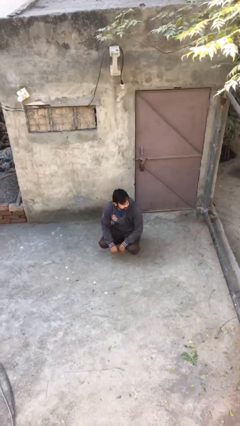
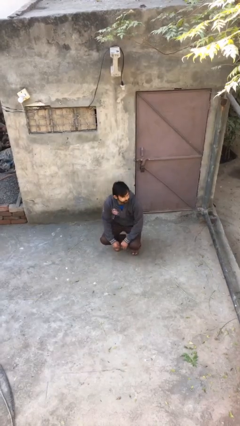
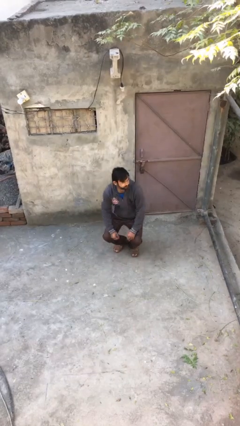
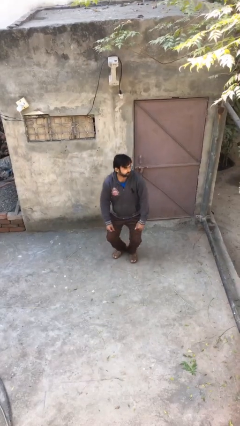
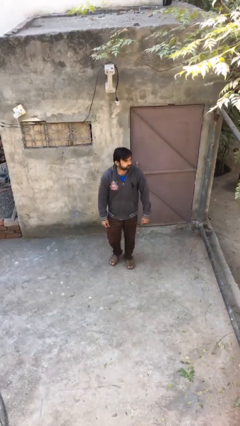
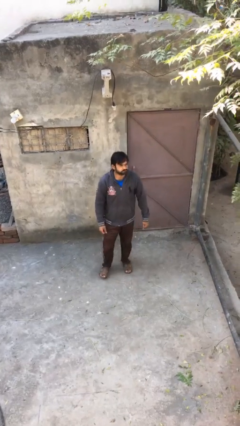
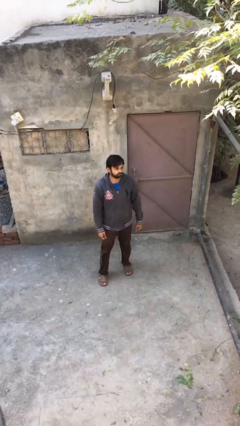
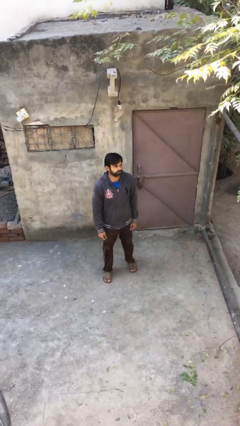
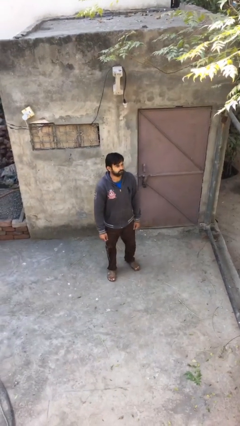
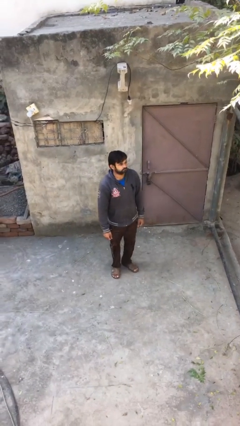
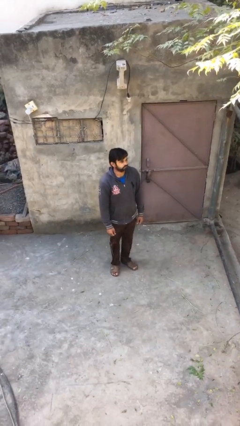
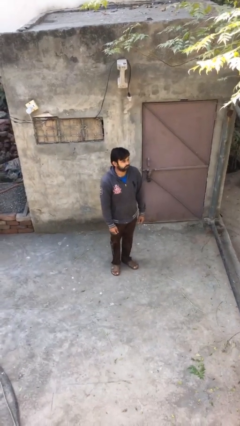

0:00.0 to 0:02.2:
person stands up

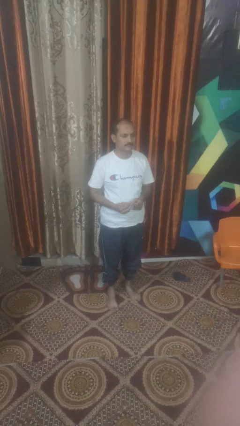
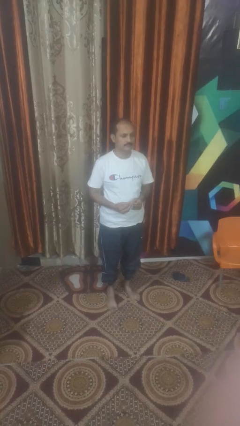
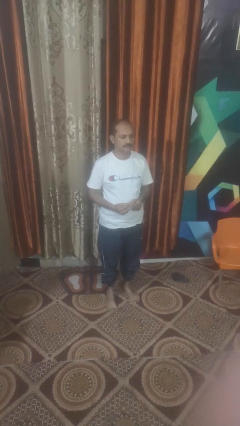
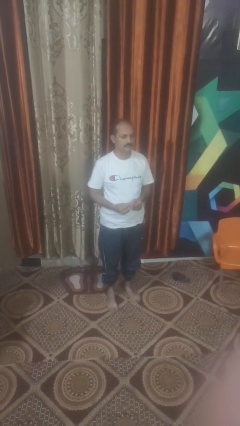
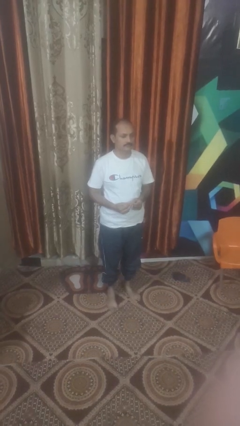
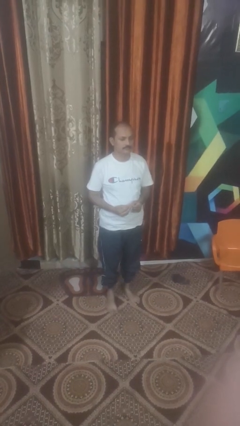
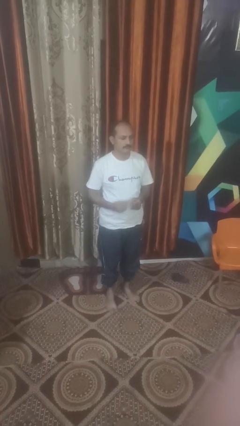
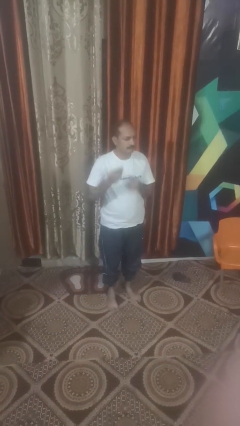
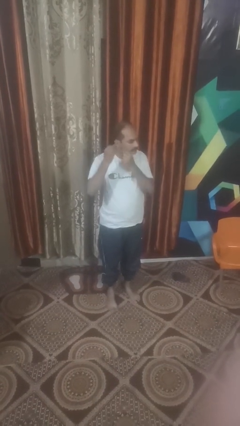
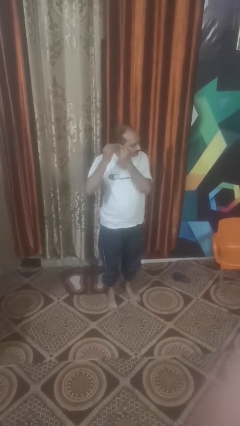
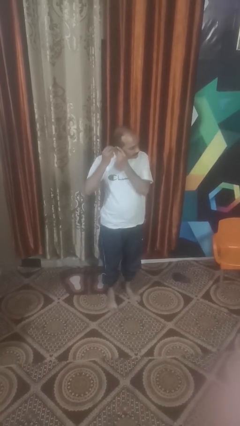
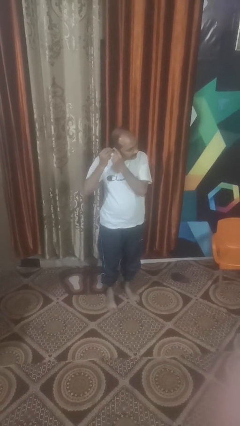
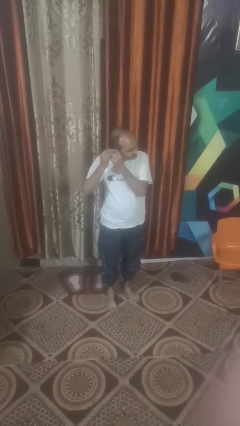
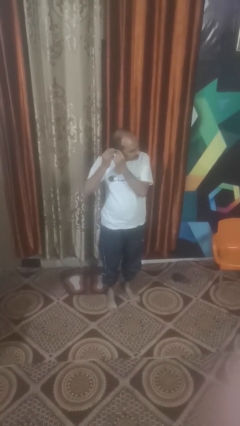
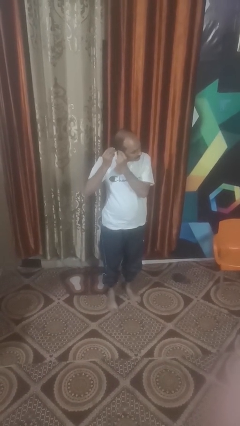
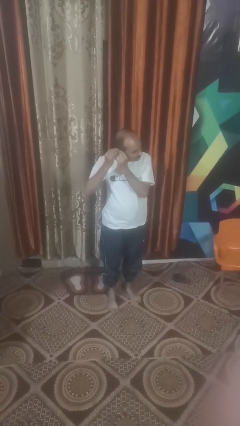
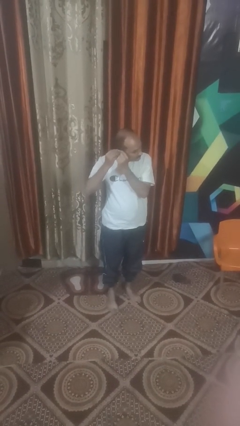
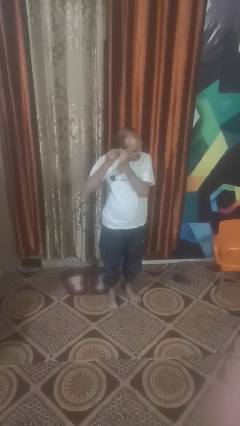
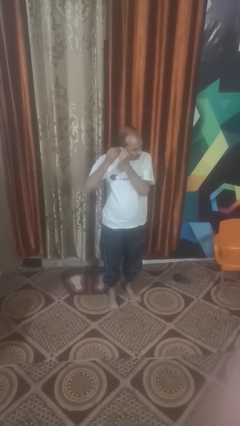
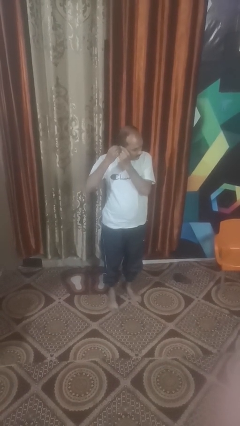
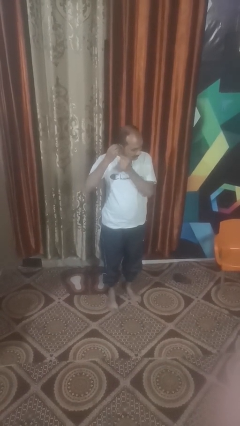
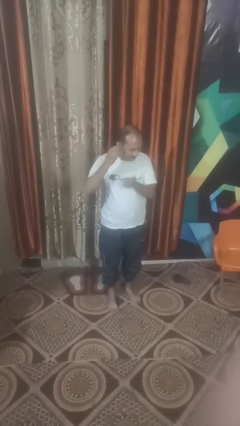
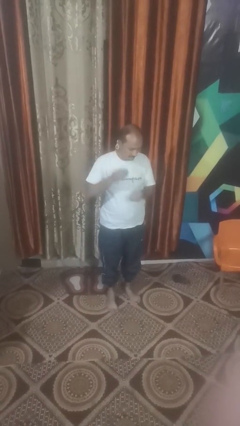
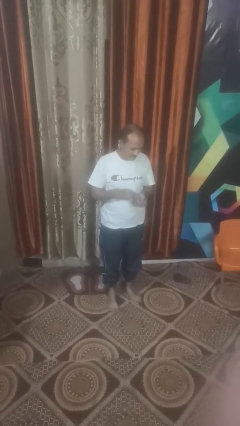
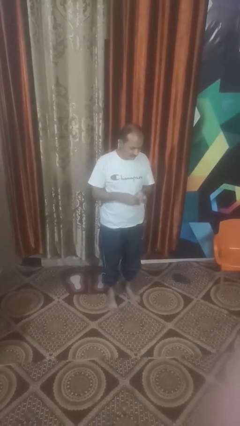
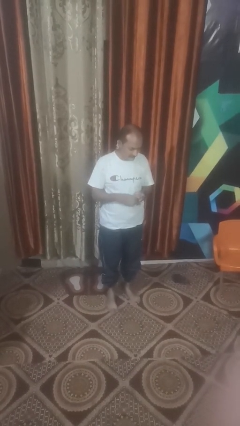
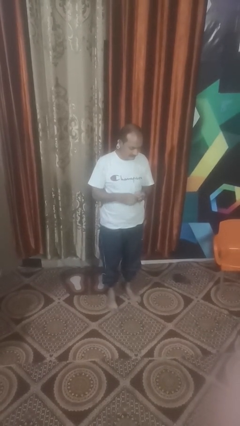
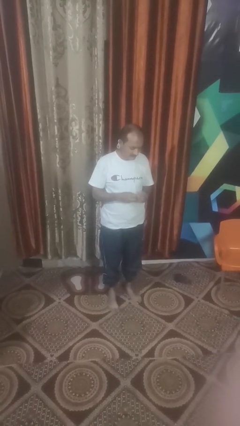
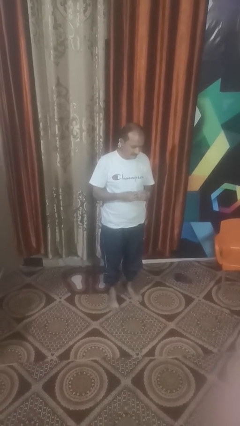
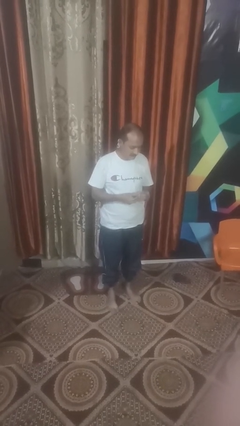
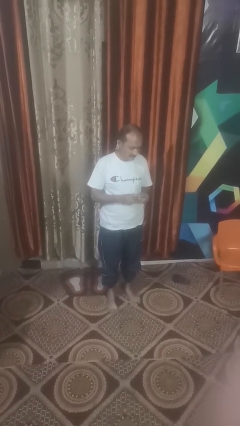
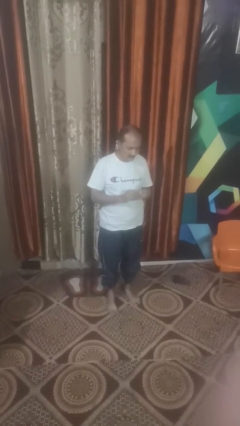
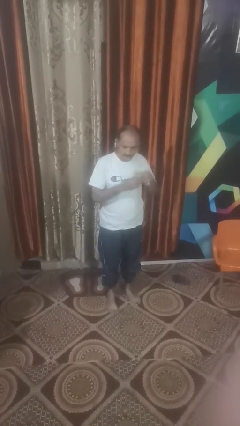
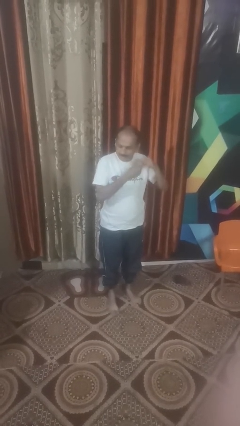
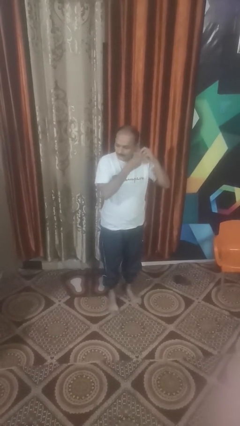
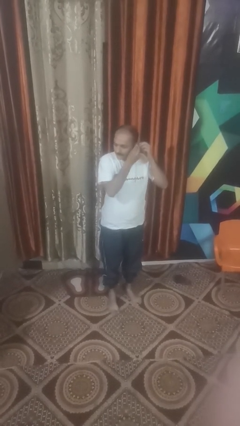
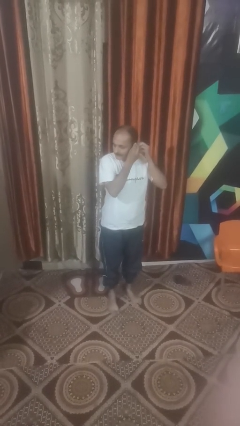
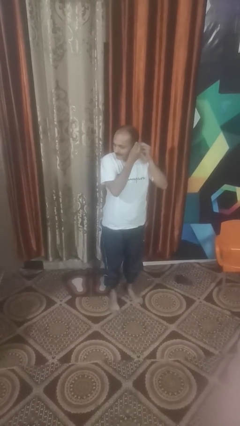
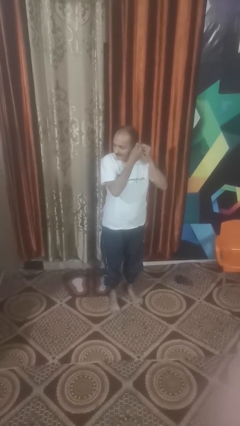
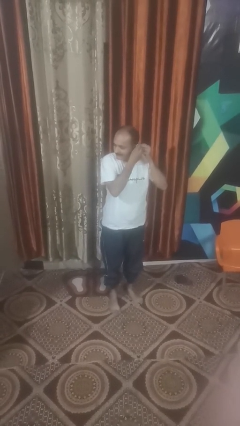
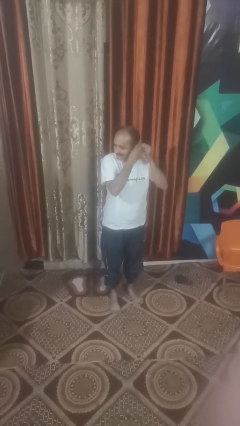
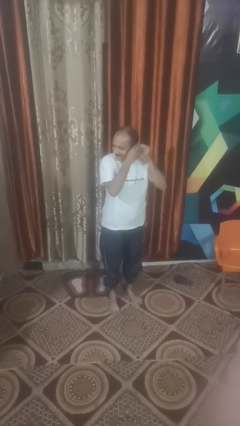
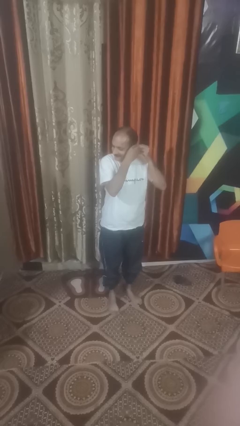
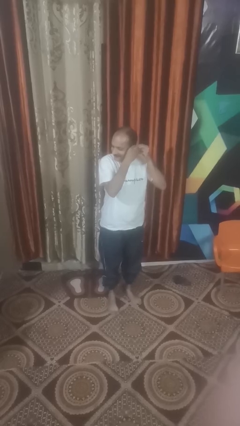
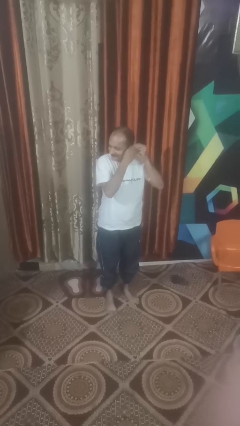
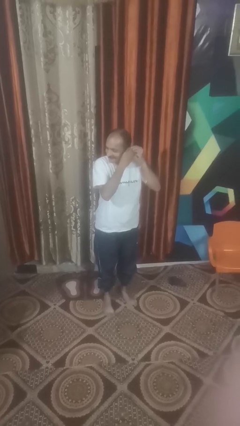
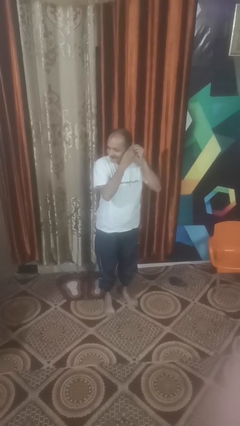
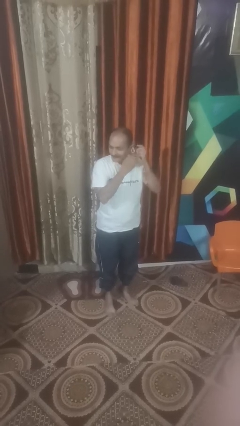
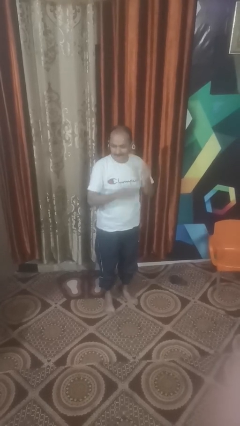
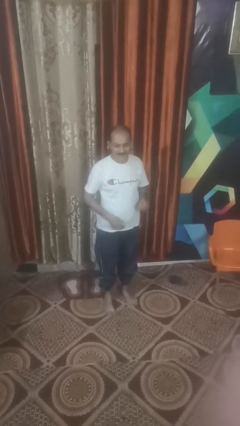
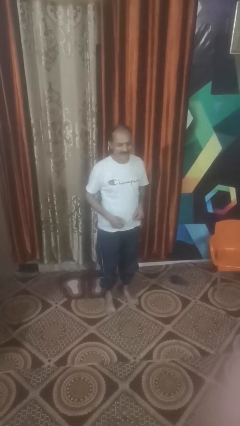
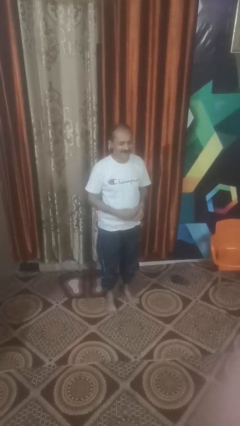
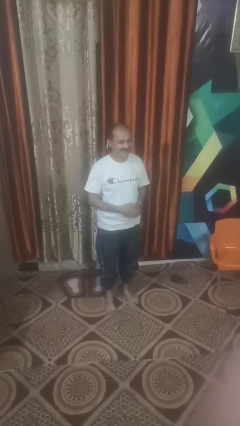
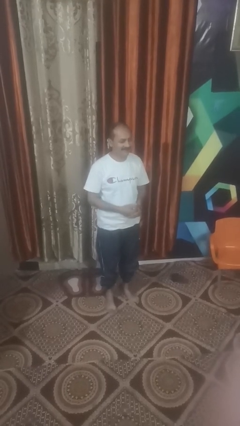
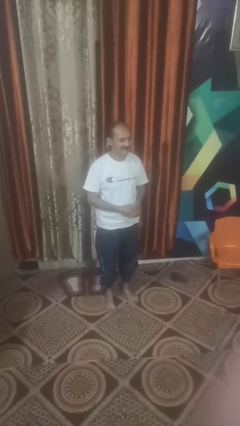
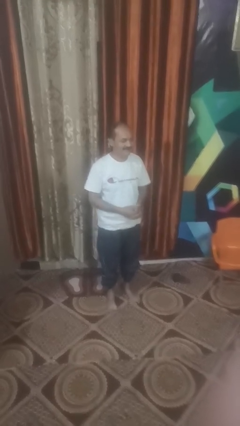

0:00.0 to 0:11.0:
person puts on earrings

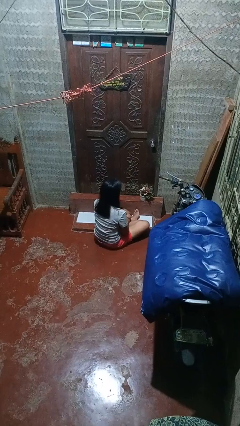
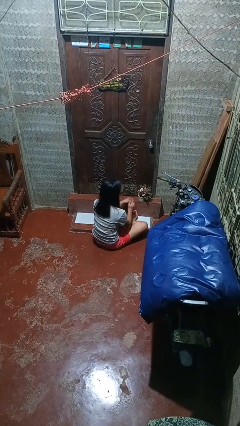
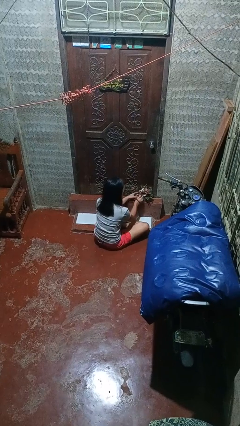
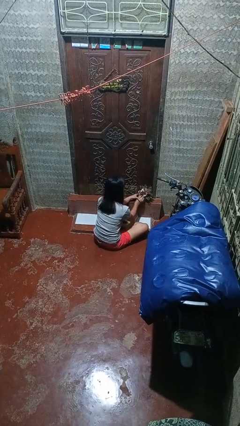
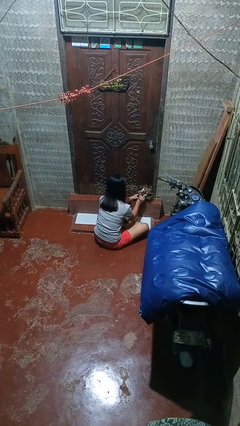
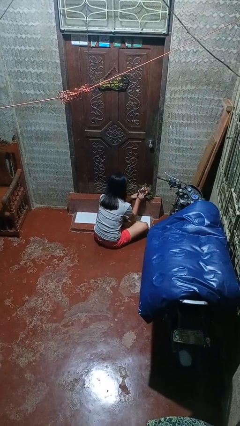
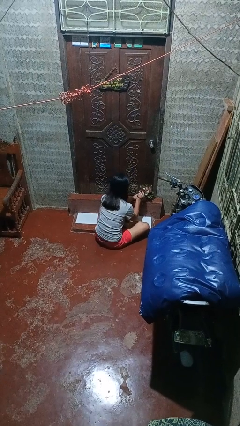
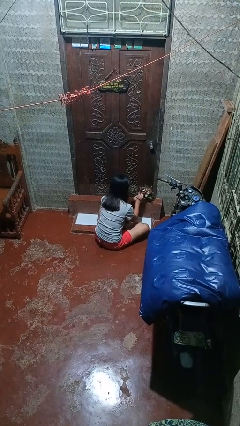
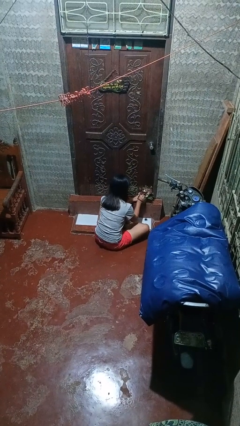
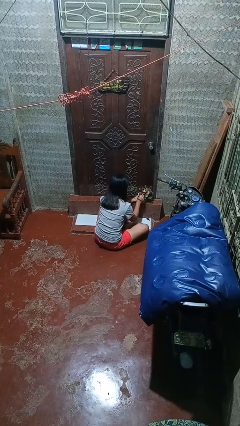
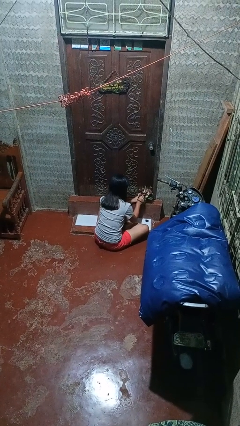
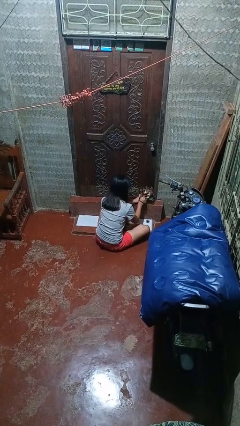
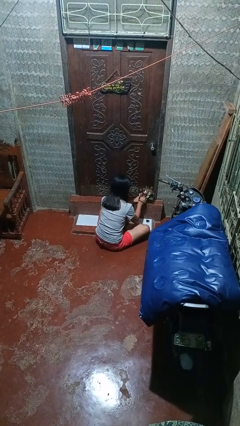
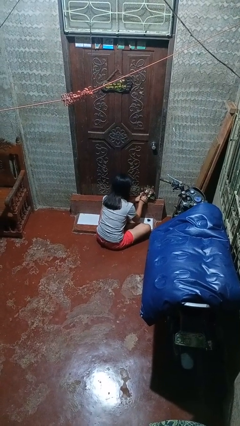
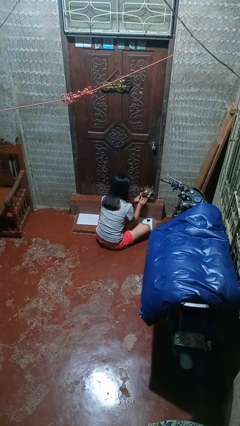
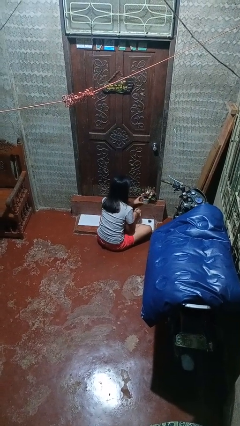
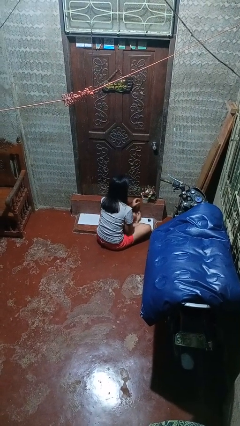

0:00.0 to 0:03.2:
person arranges flowers in vase

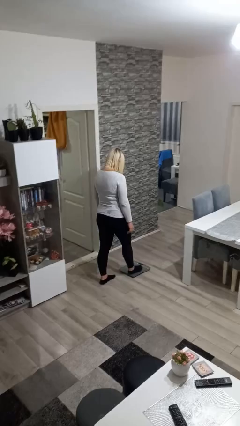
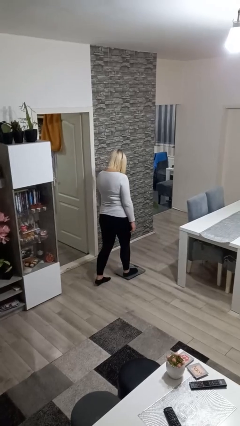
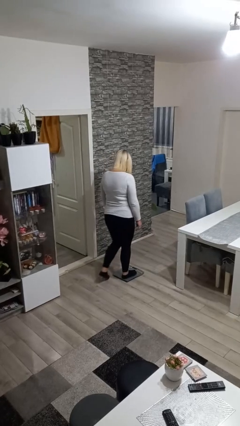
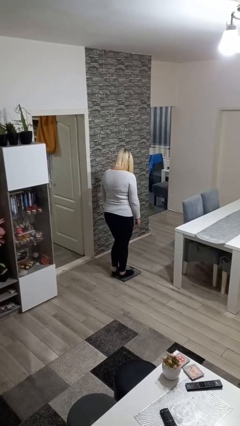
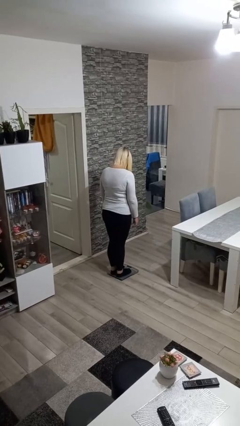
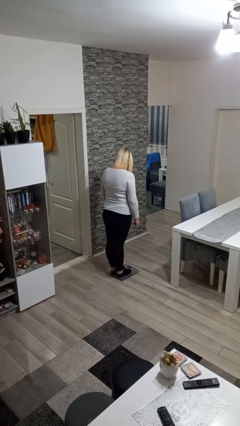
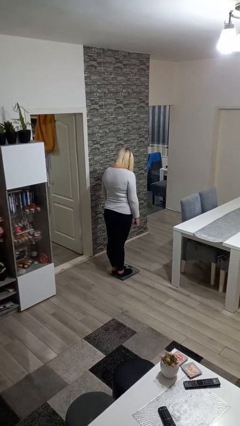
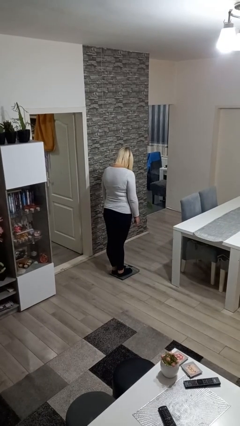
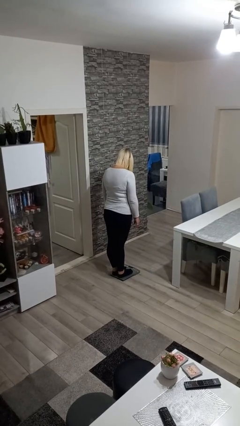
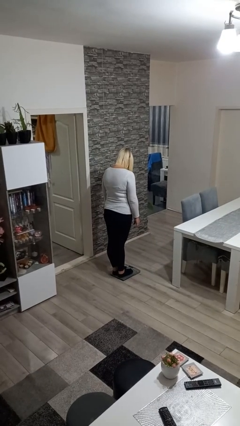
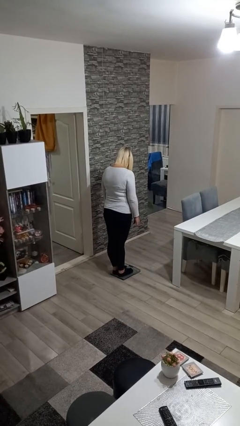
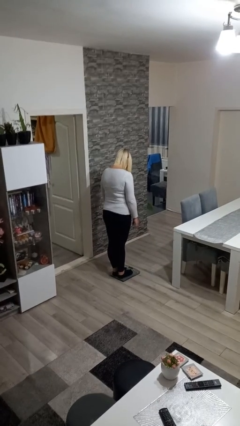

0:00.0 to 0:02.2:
person uses bodyweight scale
